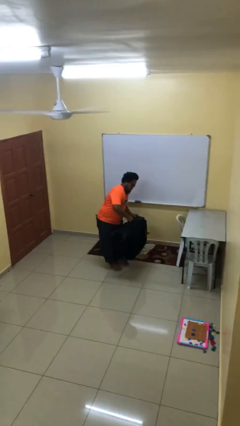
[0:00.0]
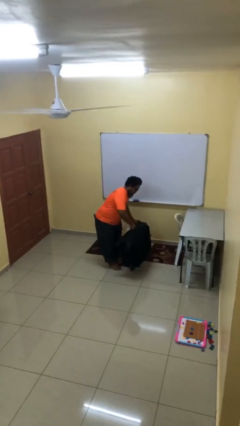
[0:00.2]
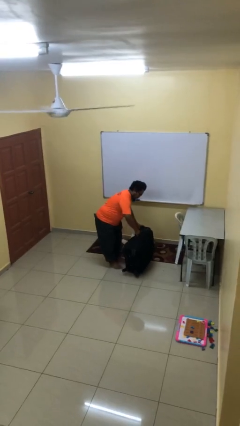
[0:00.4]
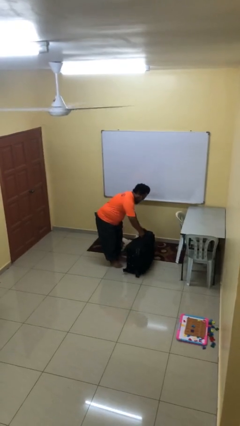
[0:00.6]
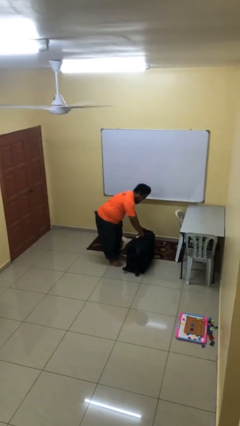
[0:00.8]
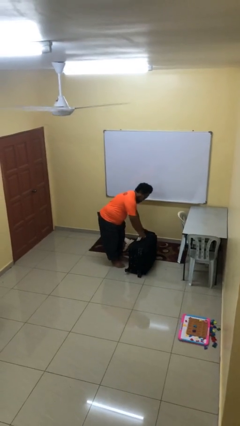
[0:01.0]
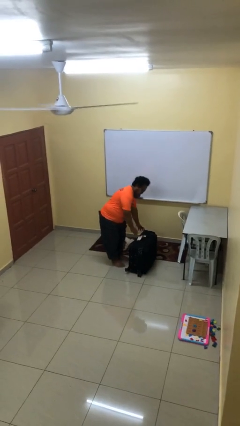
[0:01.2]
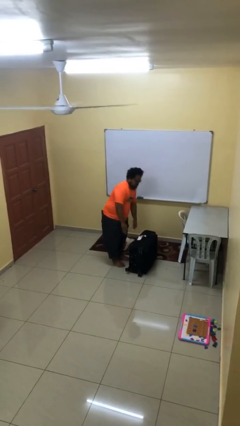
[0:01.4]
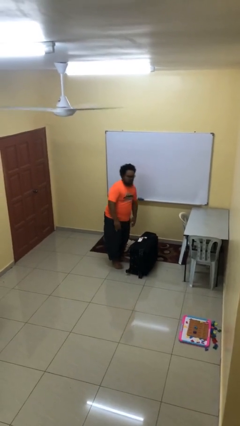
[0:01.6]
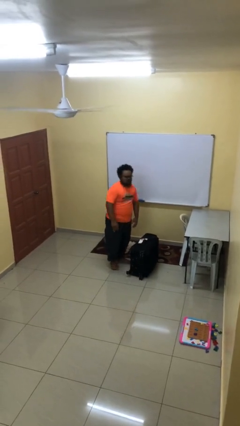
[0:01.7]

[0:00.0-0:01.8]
person puts down object on floor

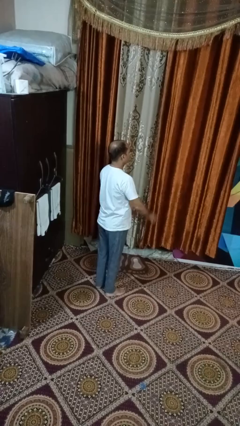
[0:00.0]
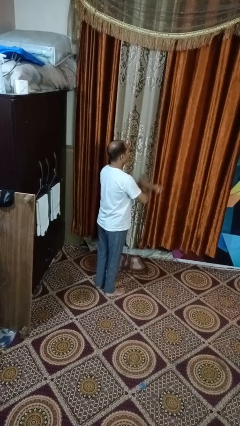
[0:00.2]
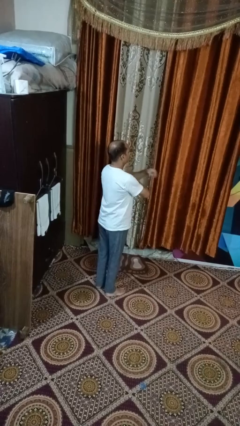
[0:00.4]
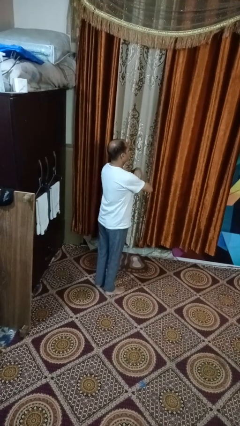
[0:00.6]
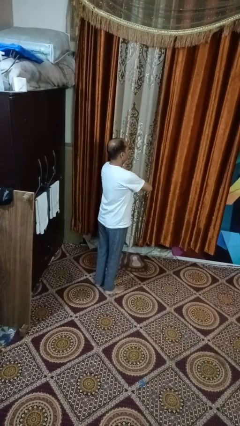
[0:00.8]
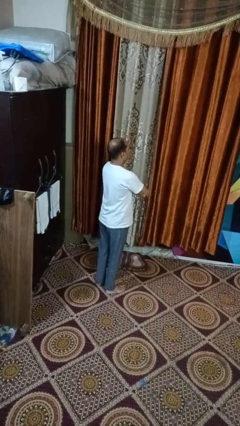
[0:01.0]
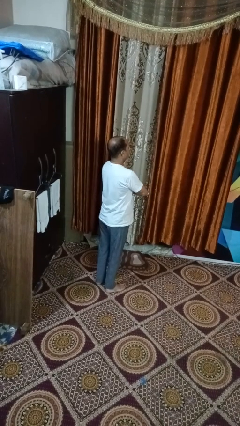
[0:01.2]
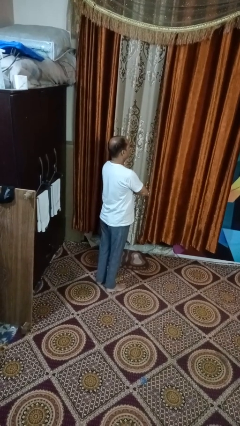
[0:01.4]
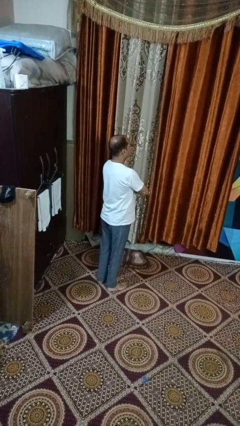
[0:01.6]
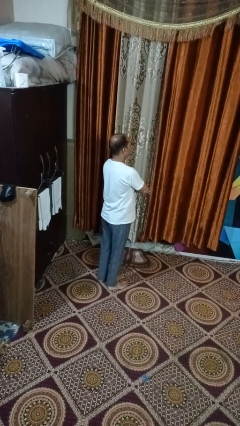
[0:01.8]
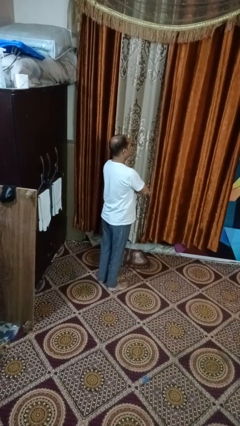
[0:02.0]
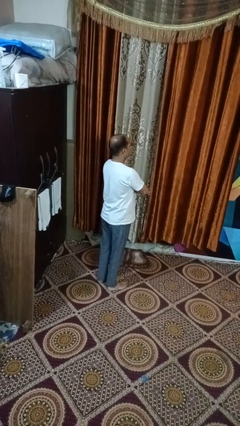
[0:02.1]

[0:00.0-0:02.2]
person crosses arms

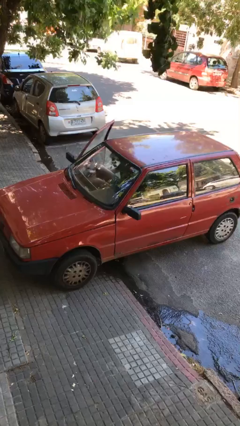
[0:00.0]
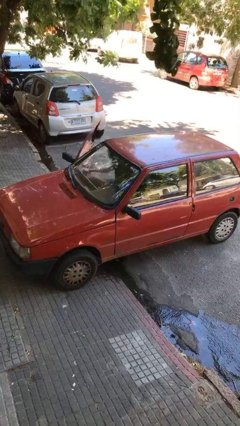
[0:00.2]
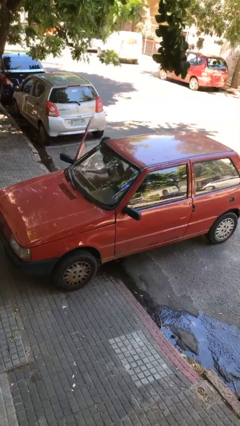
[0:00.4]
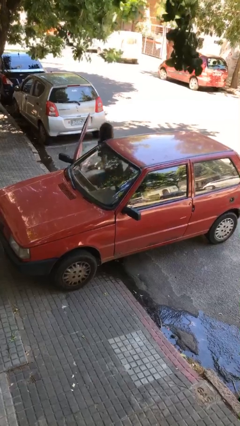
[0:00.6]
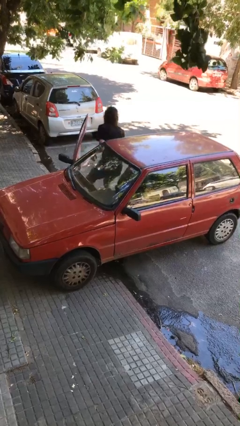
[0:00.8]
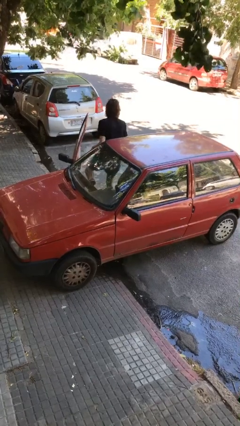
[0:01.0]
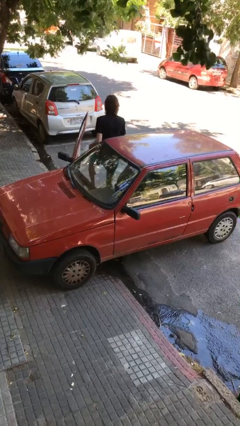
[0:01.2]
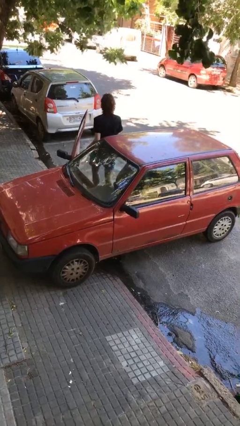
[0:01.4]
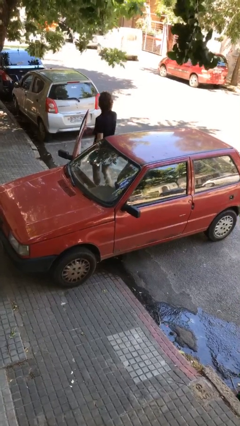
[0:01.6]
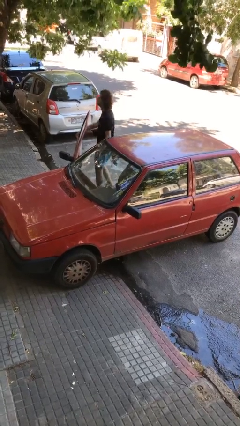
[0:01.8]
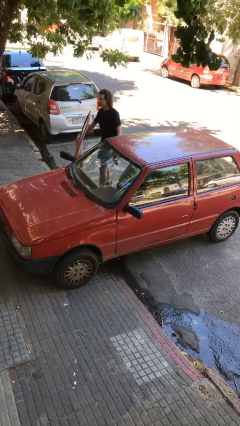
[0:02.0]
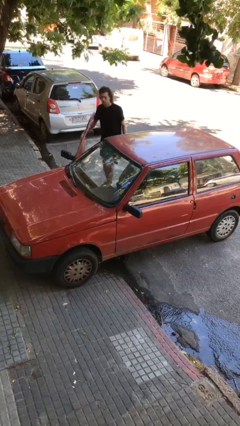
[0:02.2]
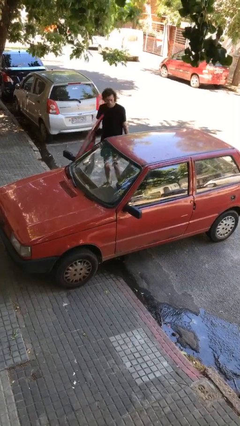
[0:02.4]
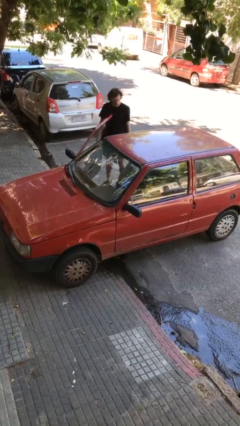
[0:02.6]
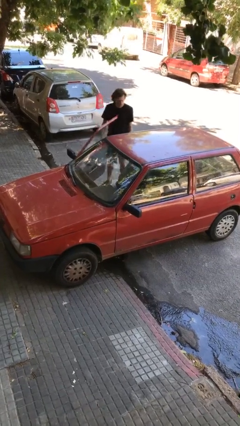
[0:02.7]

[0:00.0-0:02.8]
car drops off person

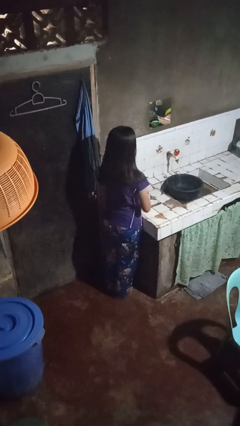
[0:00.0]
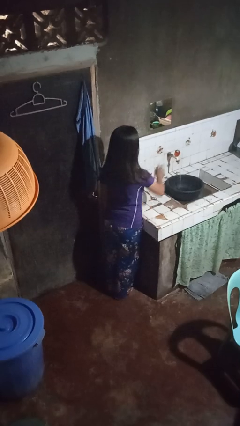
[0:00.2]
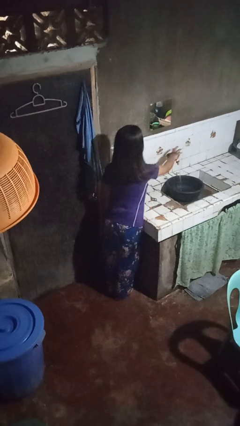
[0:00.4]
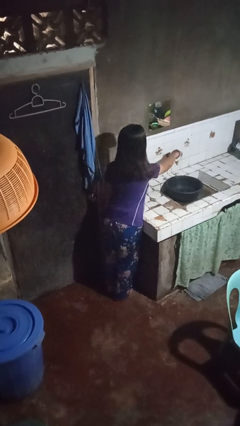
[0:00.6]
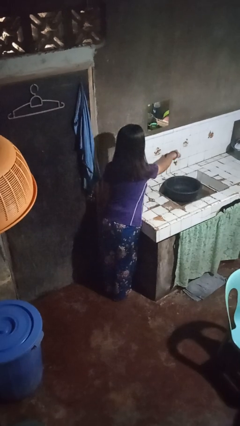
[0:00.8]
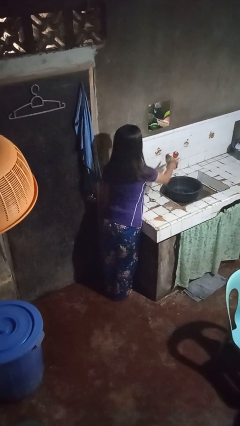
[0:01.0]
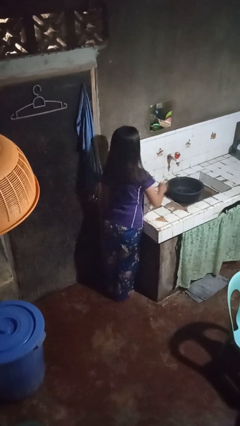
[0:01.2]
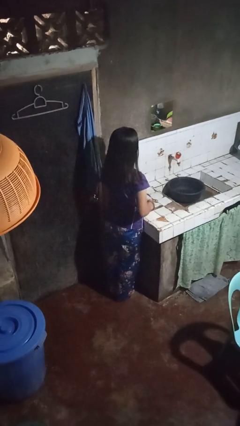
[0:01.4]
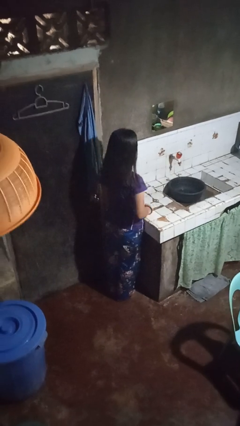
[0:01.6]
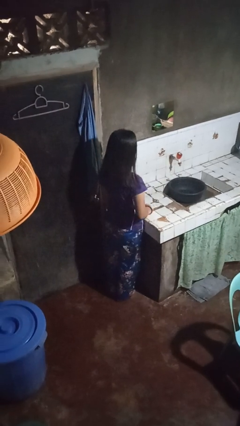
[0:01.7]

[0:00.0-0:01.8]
person turns off faucet

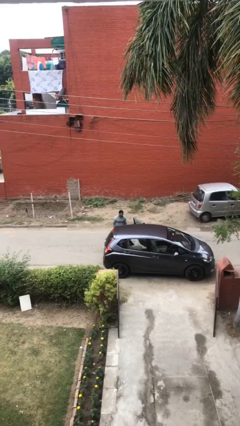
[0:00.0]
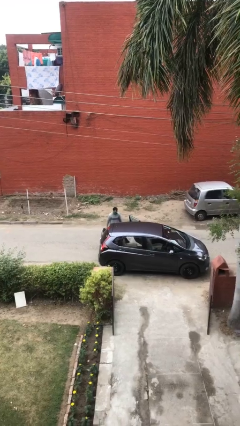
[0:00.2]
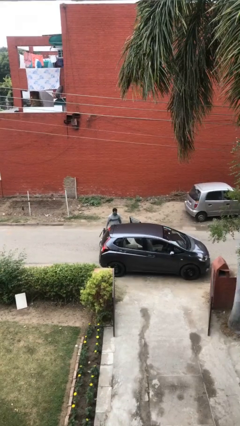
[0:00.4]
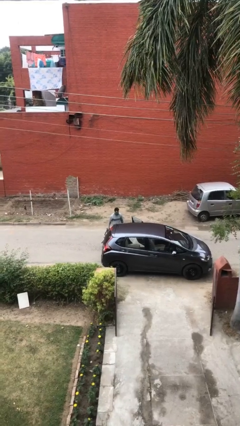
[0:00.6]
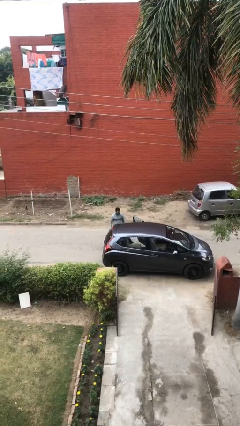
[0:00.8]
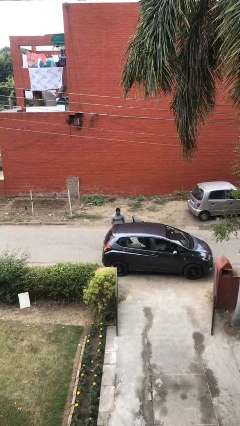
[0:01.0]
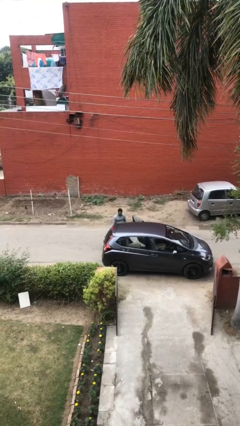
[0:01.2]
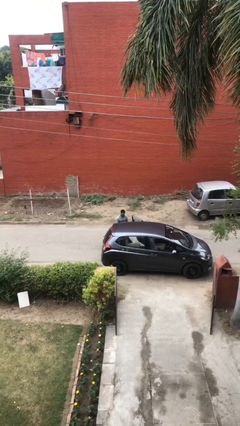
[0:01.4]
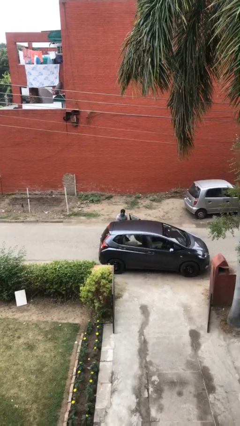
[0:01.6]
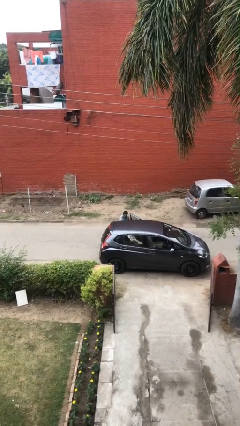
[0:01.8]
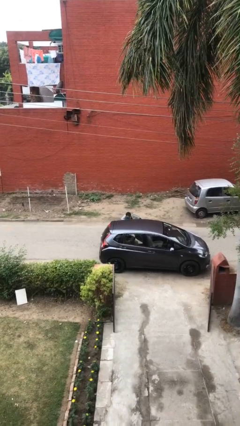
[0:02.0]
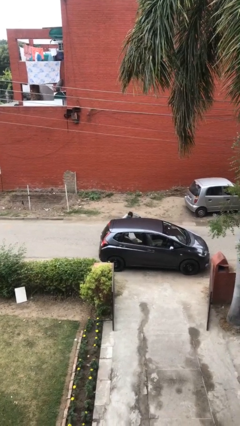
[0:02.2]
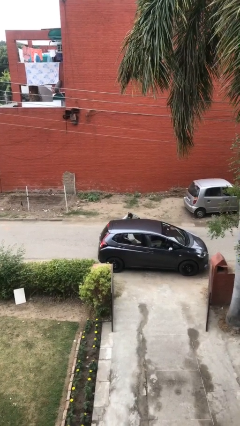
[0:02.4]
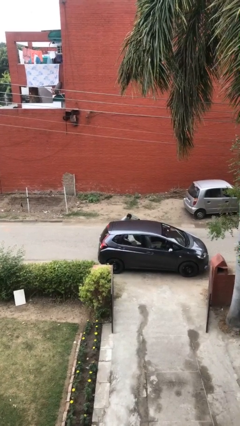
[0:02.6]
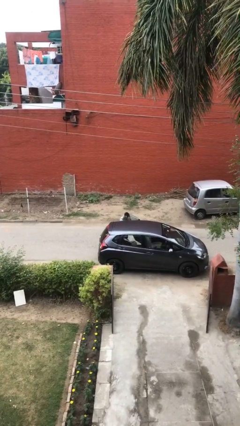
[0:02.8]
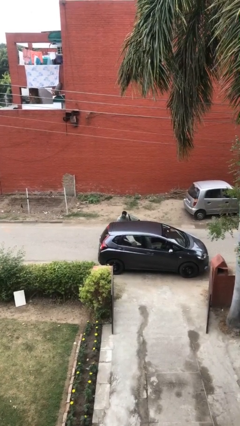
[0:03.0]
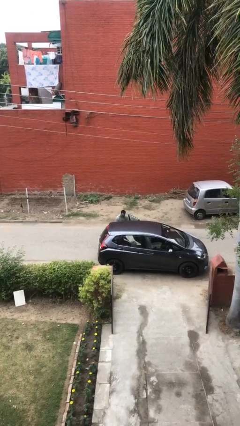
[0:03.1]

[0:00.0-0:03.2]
person loads car

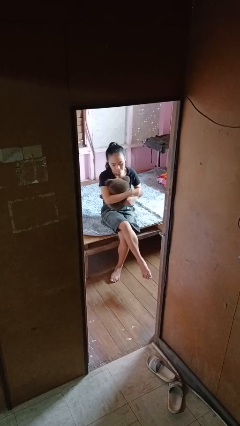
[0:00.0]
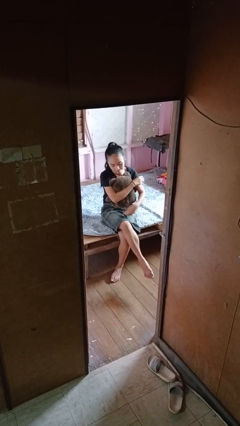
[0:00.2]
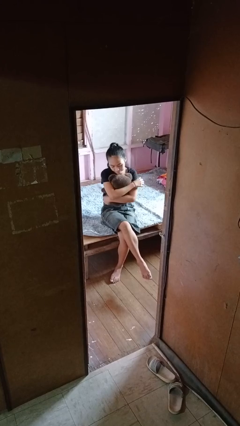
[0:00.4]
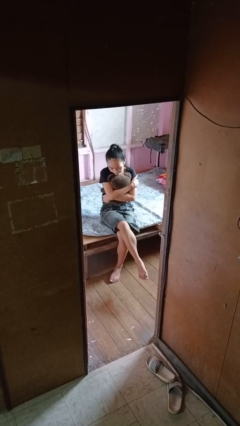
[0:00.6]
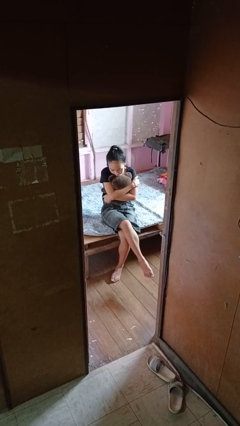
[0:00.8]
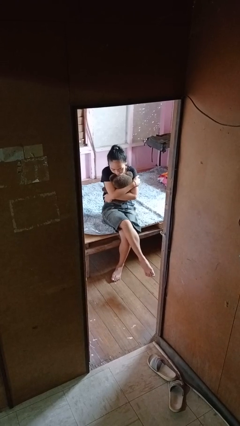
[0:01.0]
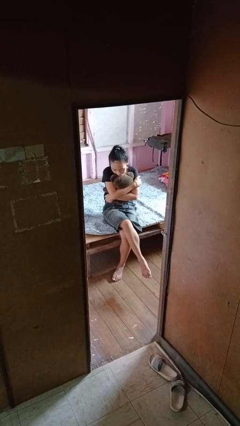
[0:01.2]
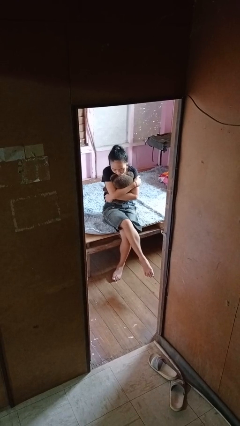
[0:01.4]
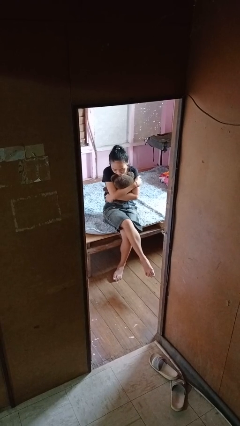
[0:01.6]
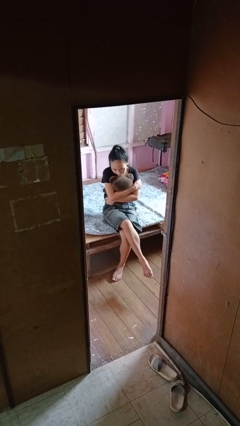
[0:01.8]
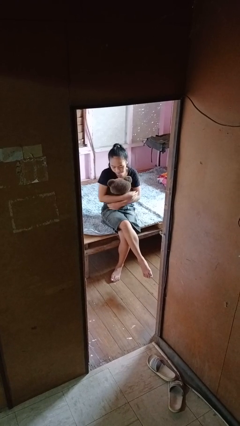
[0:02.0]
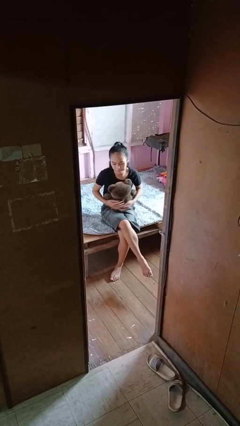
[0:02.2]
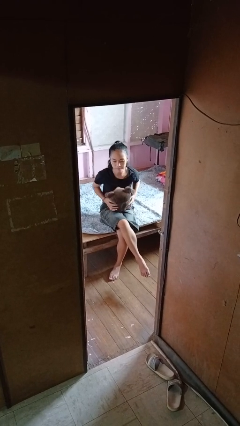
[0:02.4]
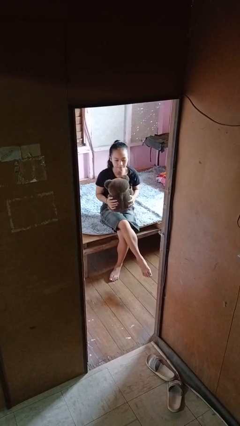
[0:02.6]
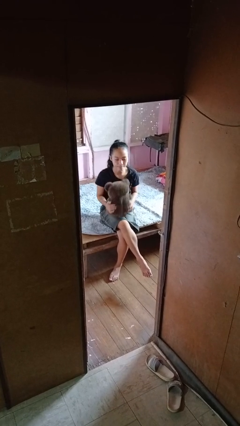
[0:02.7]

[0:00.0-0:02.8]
person hugs stuffed animal

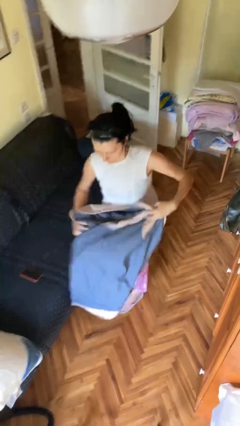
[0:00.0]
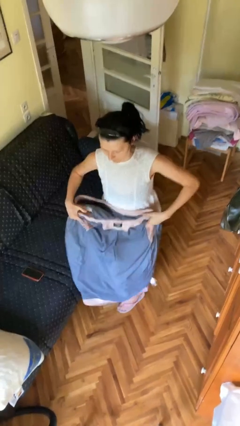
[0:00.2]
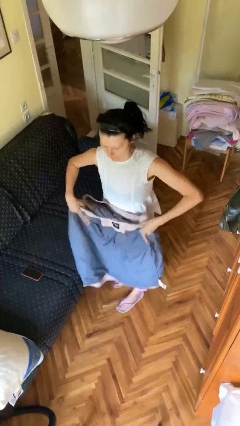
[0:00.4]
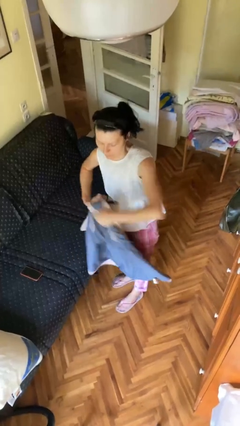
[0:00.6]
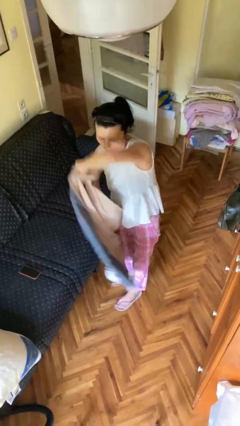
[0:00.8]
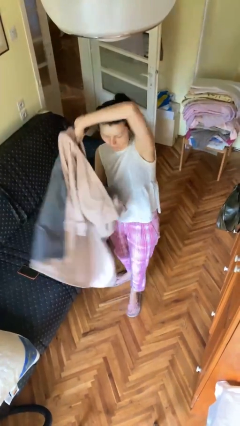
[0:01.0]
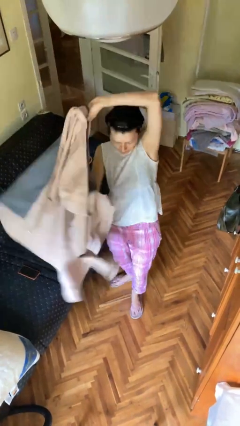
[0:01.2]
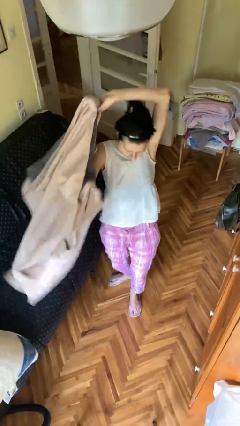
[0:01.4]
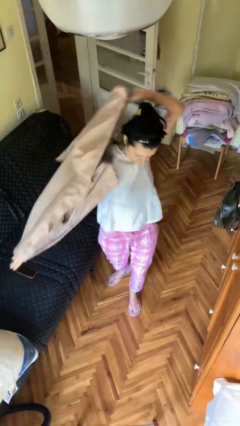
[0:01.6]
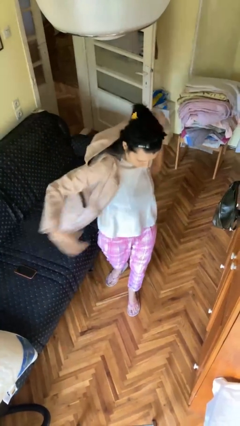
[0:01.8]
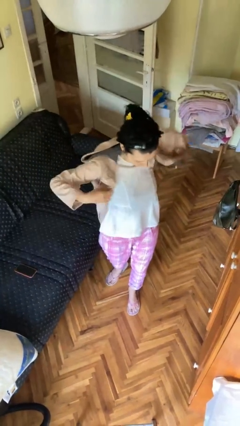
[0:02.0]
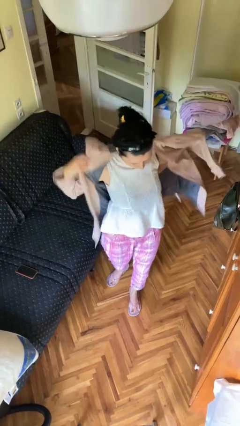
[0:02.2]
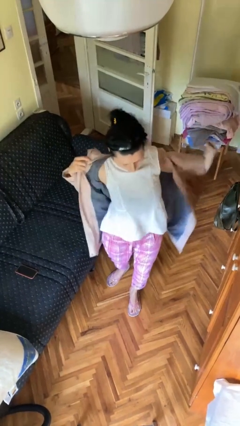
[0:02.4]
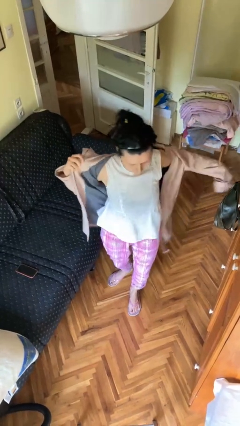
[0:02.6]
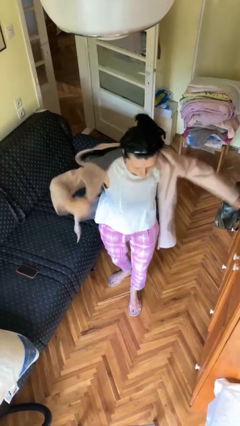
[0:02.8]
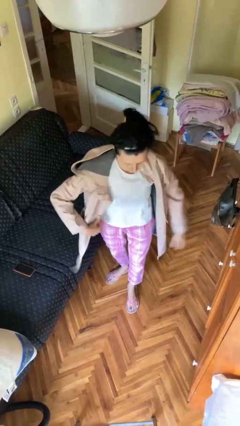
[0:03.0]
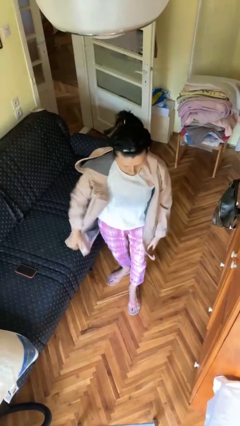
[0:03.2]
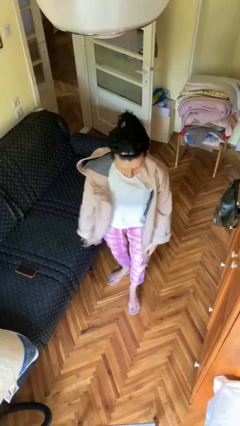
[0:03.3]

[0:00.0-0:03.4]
person puts on jacket
